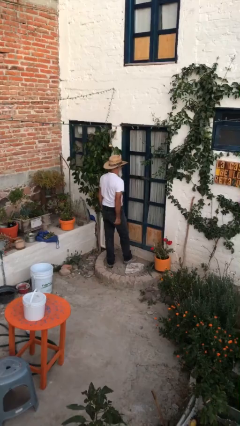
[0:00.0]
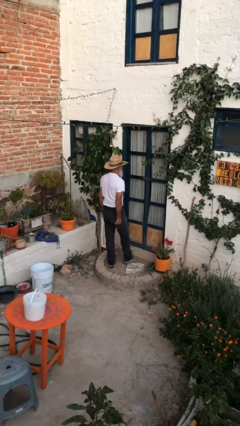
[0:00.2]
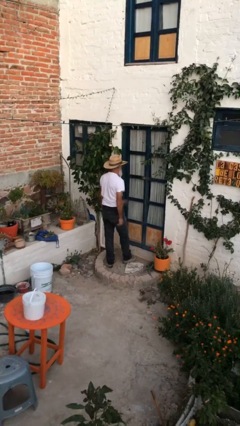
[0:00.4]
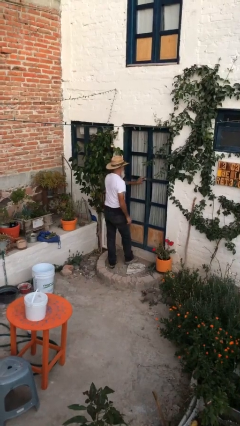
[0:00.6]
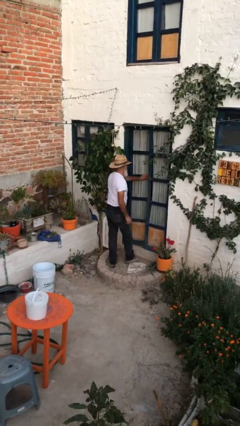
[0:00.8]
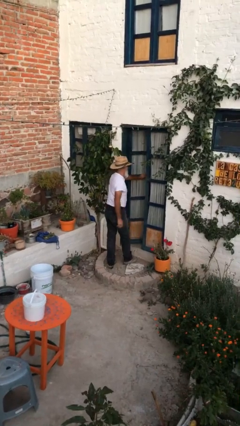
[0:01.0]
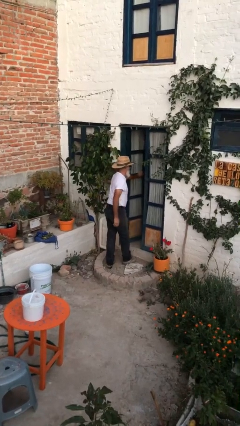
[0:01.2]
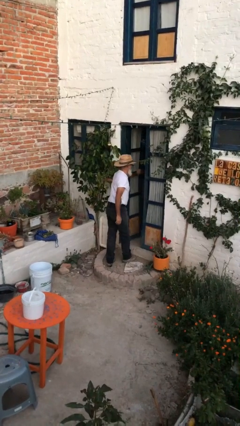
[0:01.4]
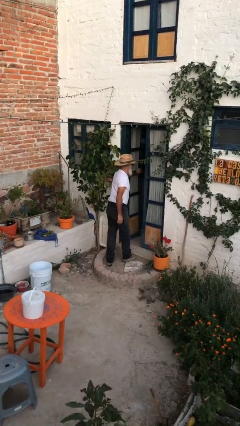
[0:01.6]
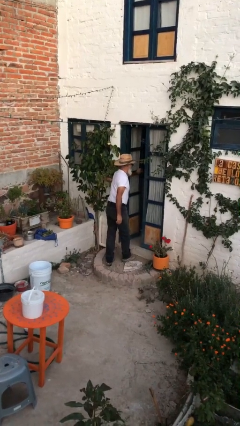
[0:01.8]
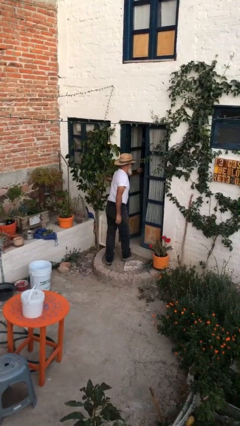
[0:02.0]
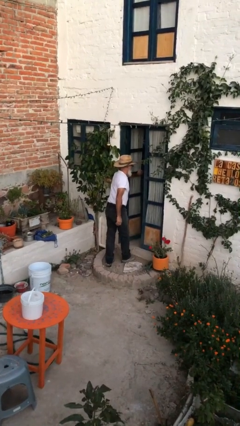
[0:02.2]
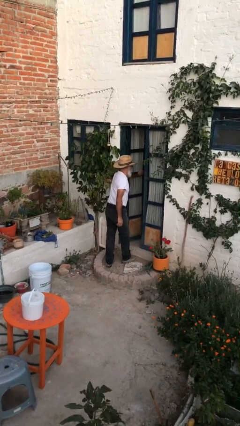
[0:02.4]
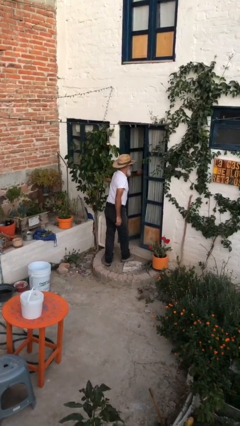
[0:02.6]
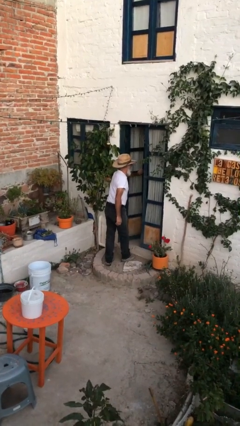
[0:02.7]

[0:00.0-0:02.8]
person opens facility door

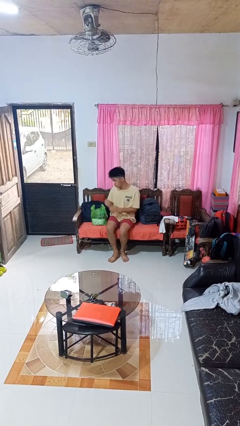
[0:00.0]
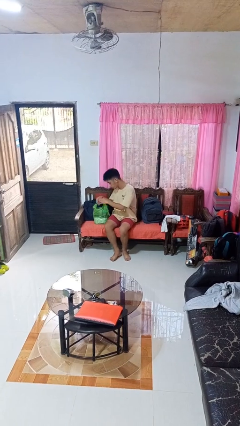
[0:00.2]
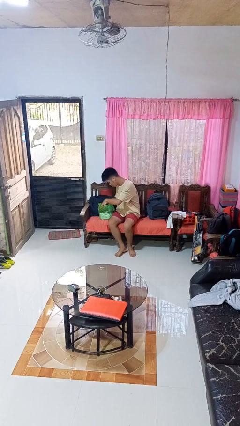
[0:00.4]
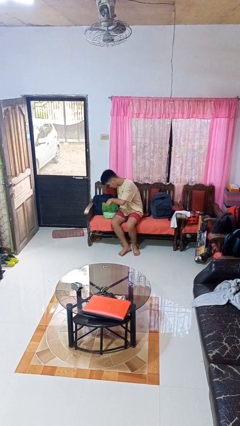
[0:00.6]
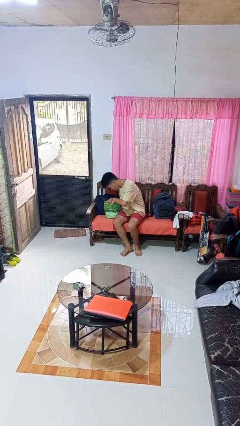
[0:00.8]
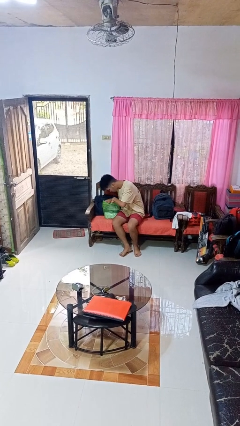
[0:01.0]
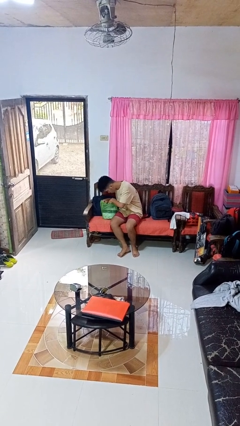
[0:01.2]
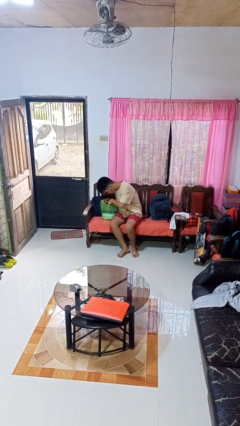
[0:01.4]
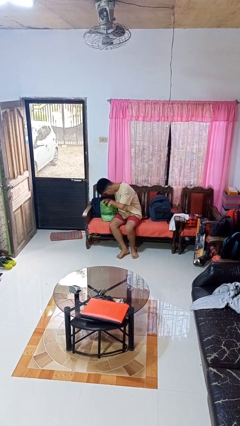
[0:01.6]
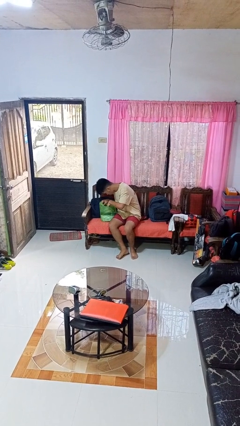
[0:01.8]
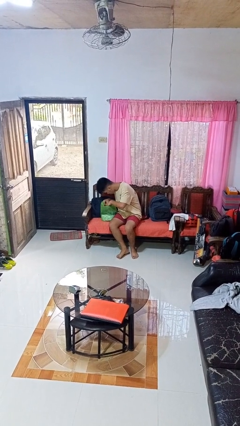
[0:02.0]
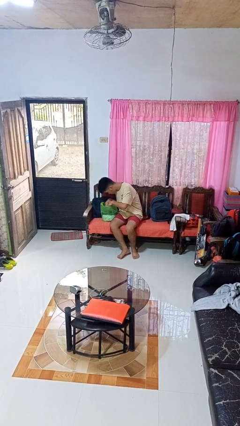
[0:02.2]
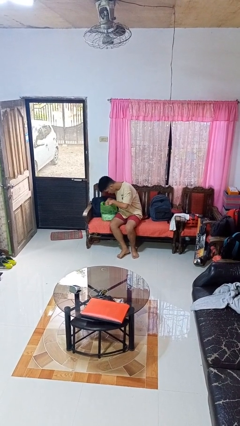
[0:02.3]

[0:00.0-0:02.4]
person searches in bag

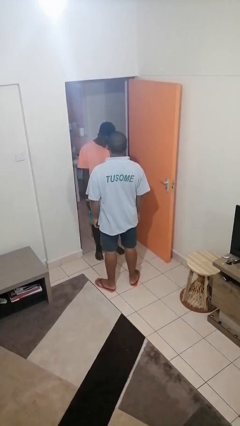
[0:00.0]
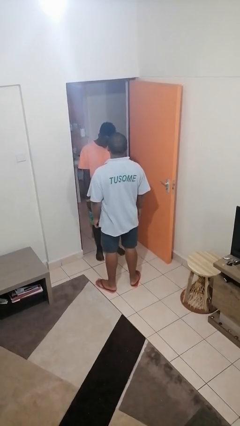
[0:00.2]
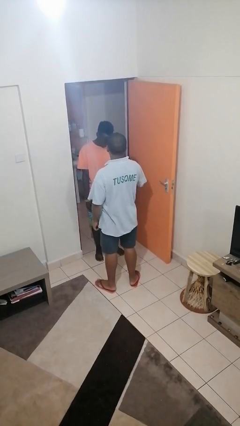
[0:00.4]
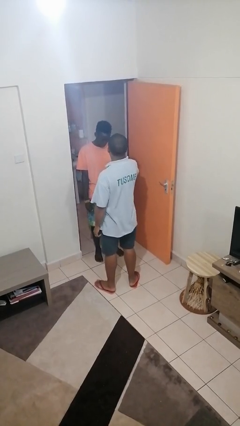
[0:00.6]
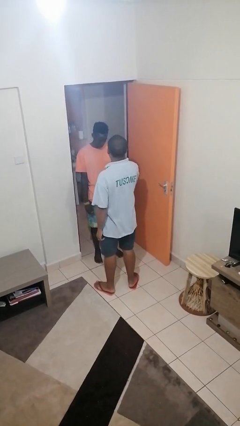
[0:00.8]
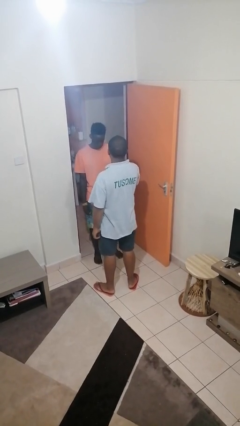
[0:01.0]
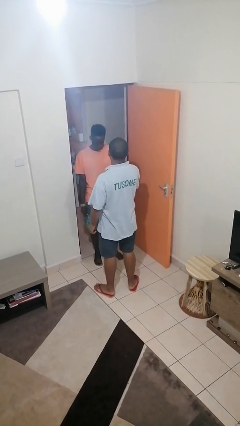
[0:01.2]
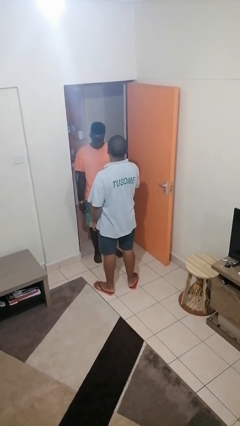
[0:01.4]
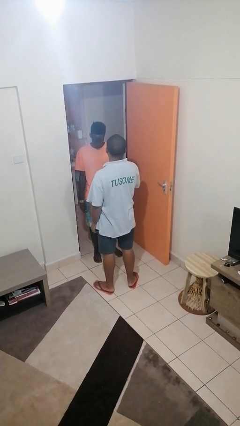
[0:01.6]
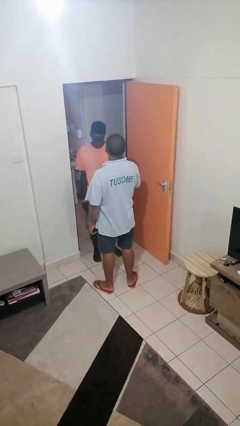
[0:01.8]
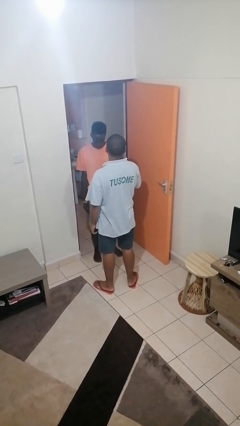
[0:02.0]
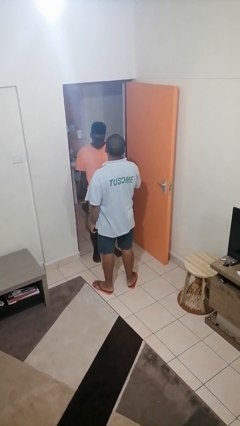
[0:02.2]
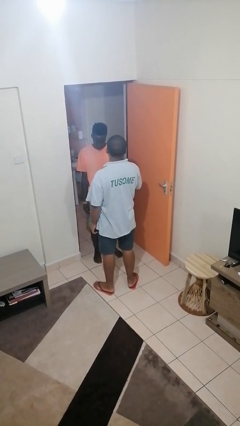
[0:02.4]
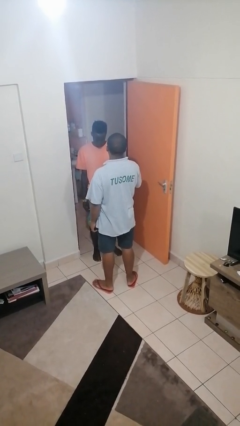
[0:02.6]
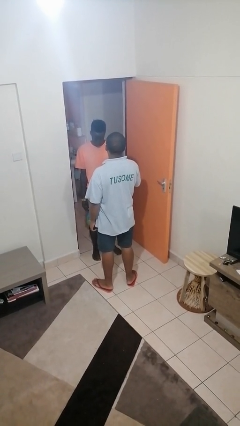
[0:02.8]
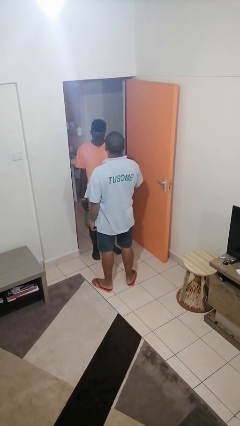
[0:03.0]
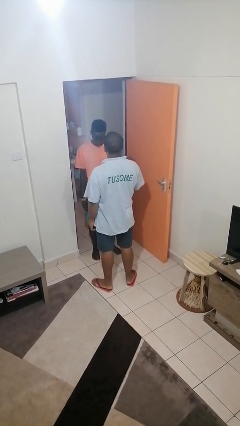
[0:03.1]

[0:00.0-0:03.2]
person grabs person by bicep

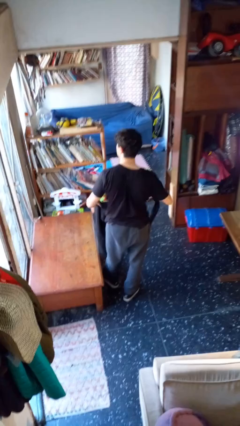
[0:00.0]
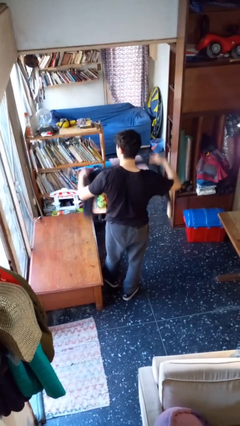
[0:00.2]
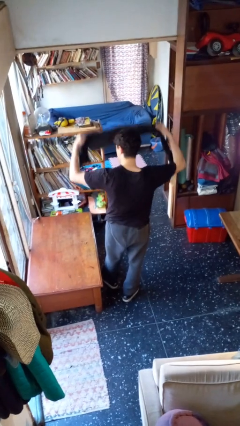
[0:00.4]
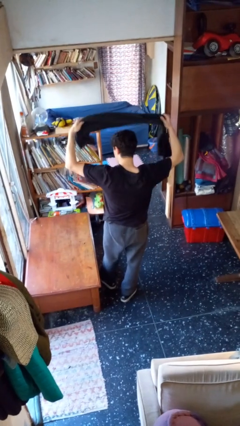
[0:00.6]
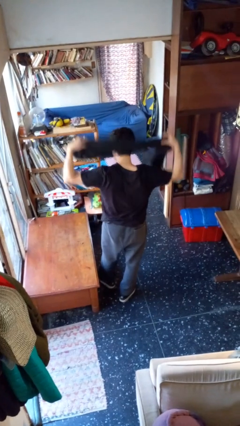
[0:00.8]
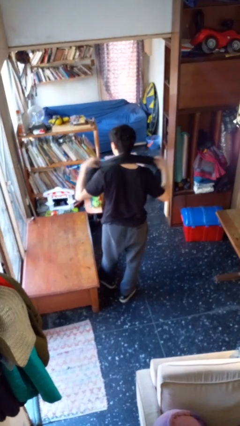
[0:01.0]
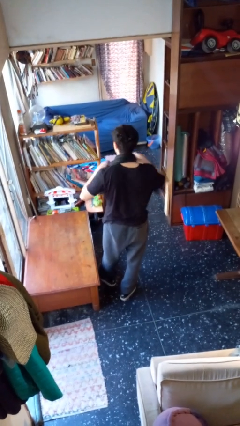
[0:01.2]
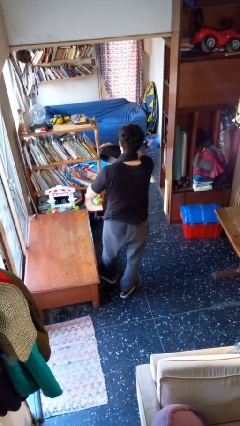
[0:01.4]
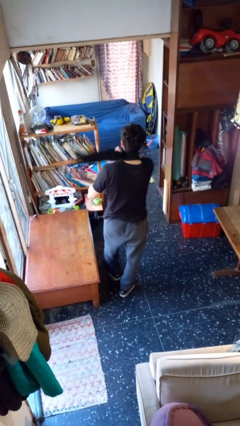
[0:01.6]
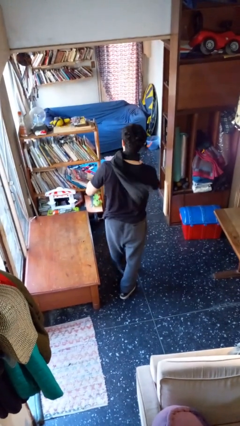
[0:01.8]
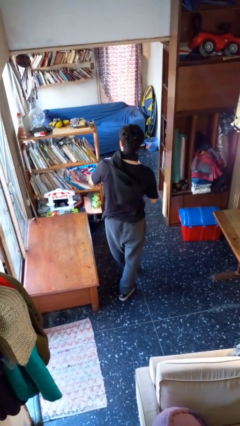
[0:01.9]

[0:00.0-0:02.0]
person puts on scarf

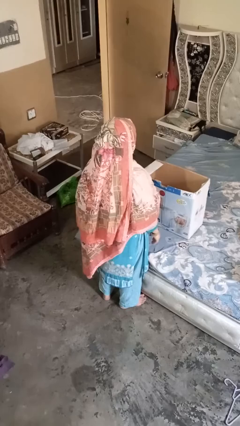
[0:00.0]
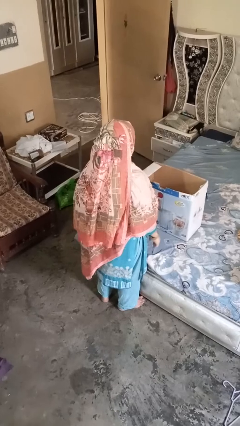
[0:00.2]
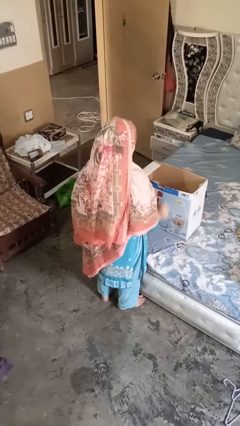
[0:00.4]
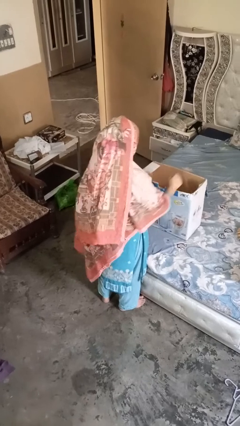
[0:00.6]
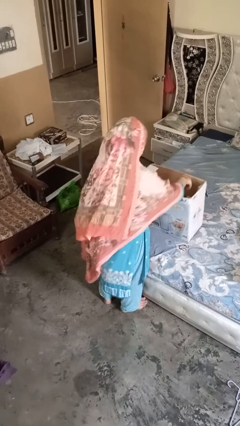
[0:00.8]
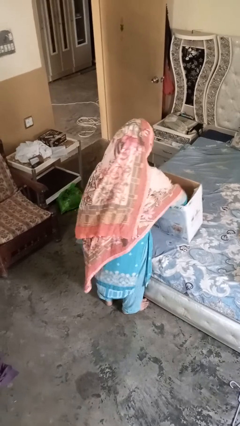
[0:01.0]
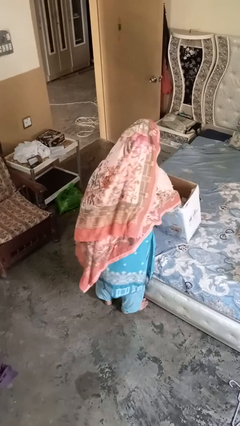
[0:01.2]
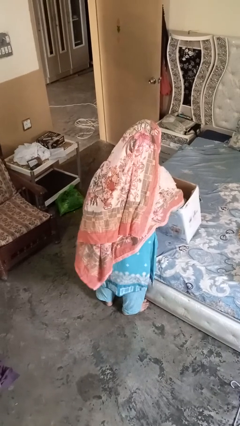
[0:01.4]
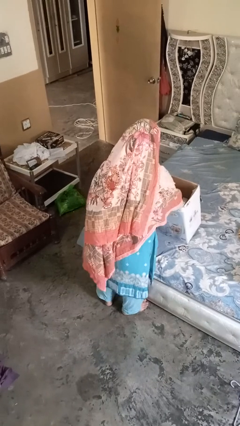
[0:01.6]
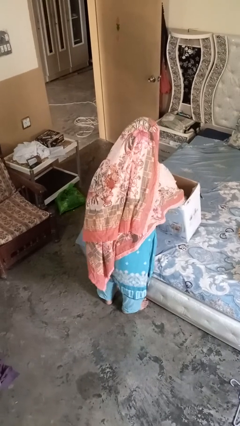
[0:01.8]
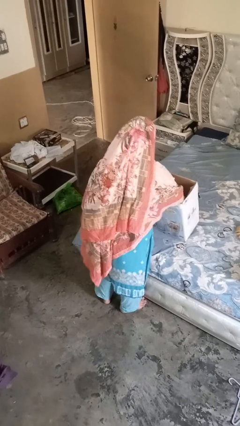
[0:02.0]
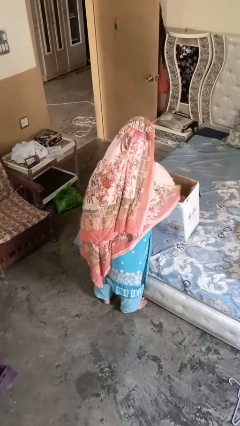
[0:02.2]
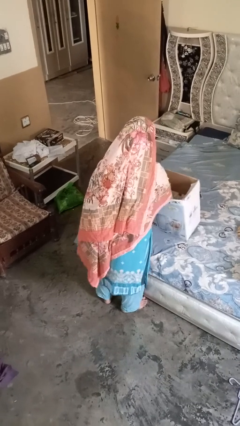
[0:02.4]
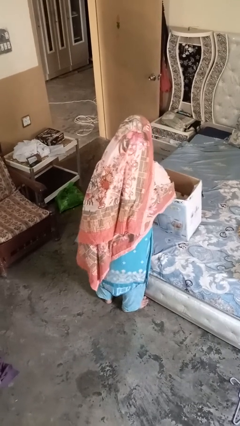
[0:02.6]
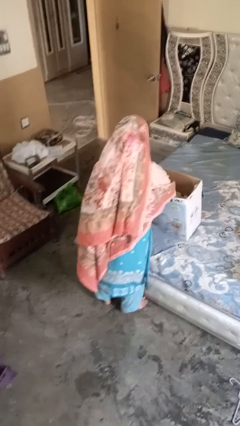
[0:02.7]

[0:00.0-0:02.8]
person searches in box

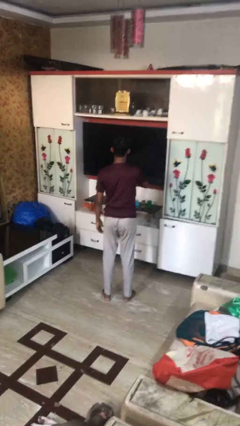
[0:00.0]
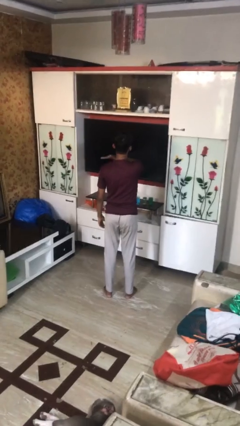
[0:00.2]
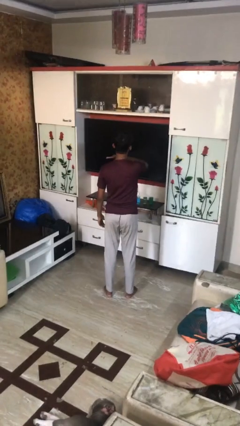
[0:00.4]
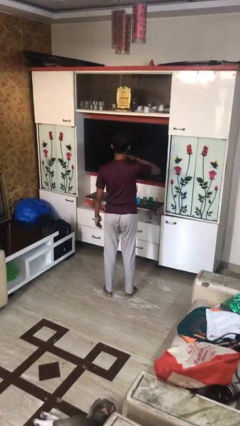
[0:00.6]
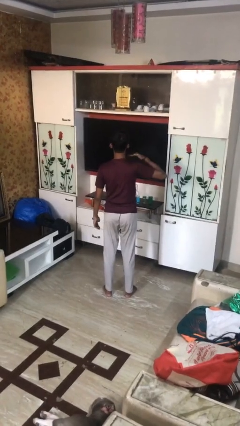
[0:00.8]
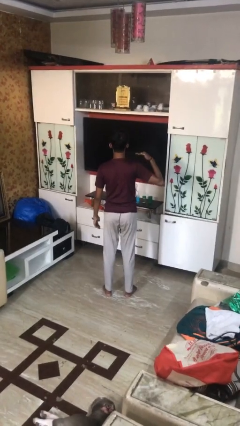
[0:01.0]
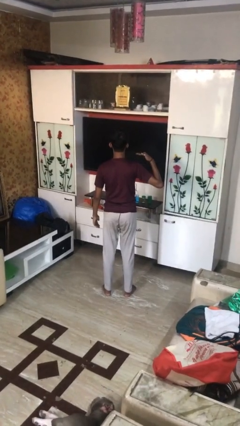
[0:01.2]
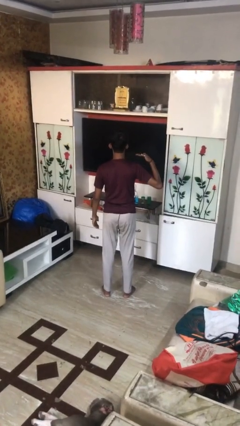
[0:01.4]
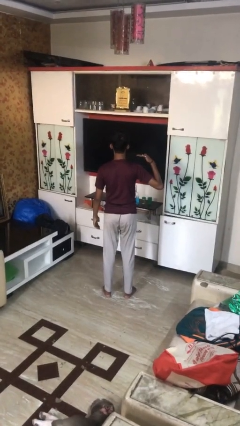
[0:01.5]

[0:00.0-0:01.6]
person gestures cut

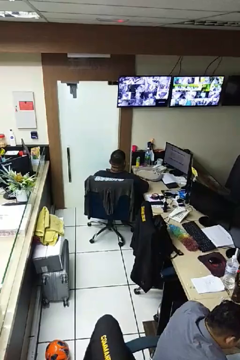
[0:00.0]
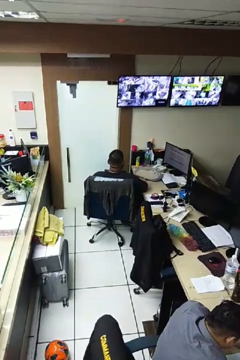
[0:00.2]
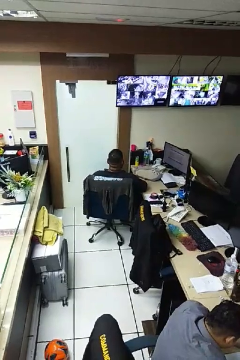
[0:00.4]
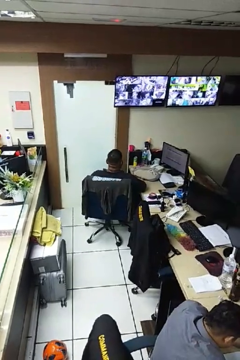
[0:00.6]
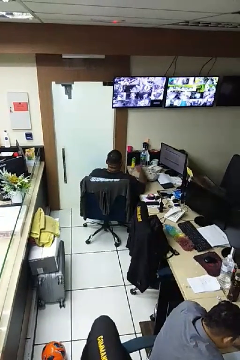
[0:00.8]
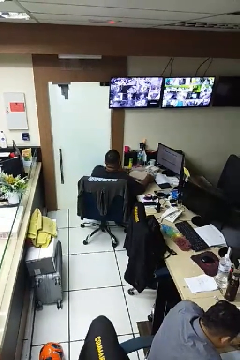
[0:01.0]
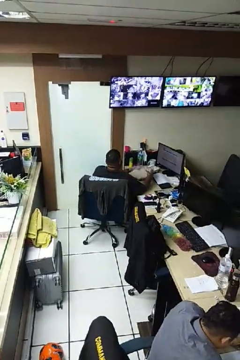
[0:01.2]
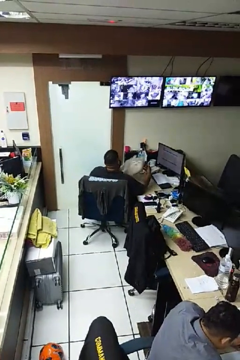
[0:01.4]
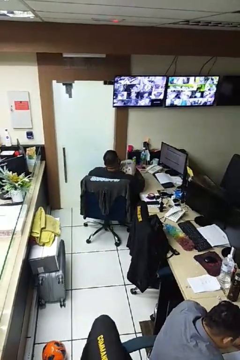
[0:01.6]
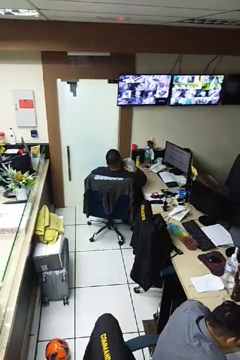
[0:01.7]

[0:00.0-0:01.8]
person hugs stuffed animal

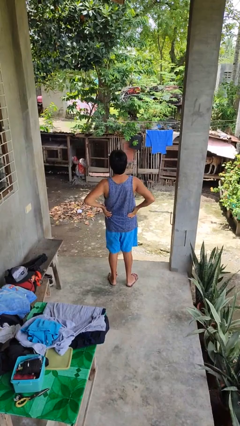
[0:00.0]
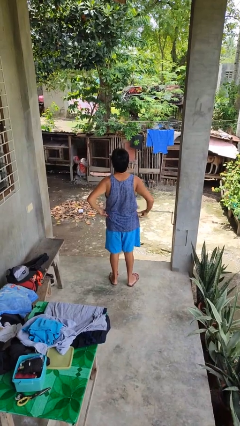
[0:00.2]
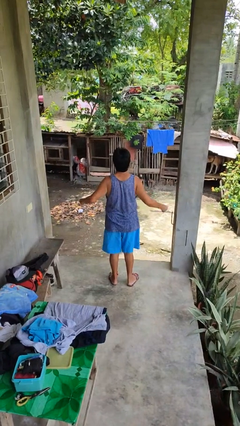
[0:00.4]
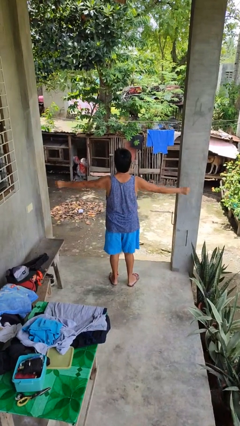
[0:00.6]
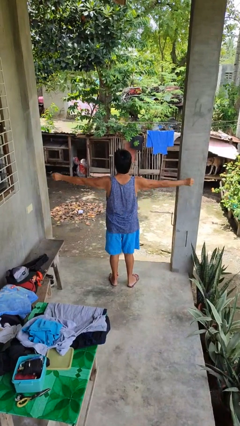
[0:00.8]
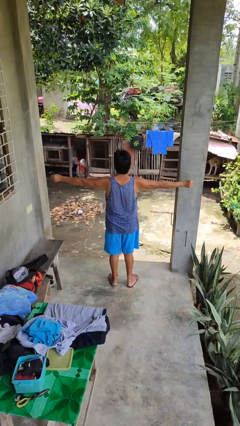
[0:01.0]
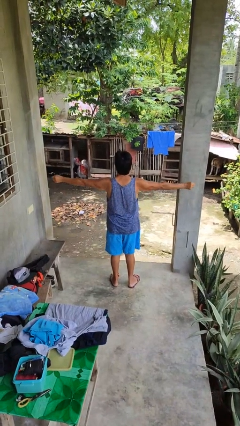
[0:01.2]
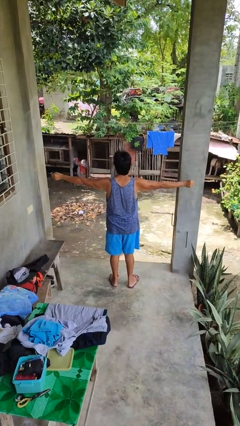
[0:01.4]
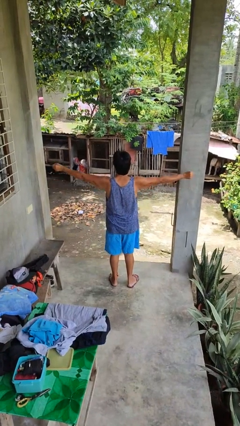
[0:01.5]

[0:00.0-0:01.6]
person stretches arms to side
